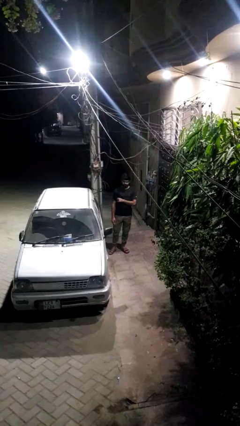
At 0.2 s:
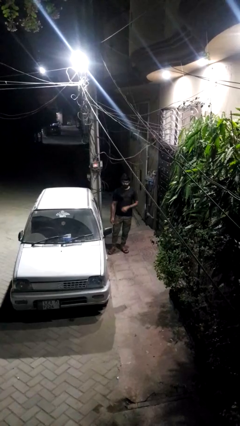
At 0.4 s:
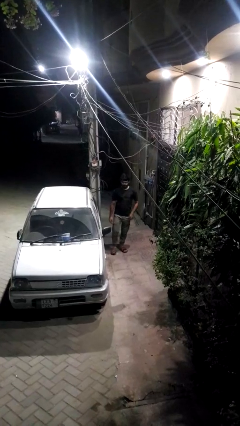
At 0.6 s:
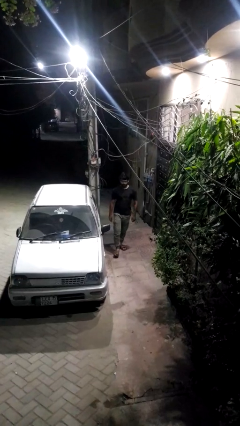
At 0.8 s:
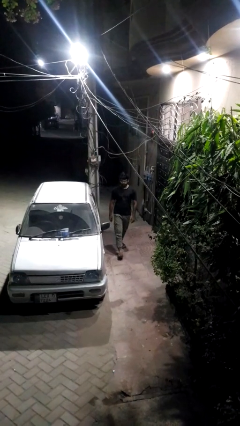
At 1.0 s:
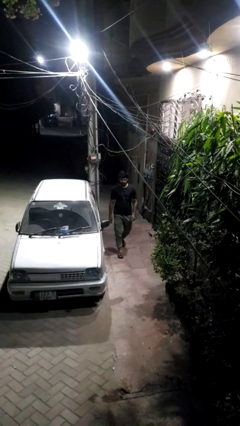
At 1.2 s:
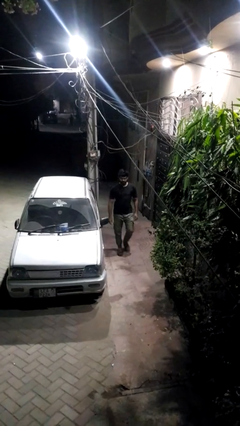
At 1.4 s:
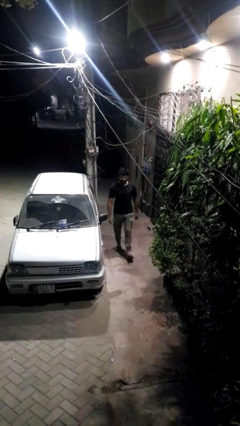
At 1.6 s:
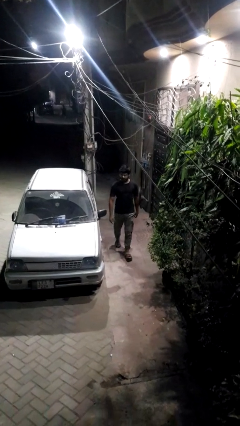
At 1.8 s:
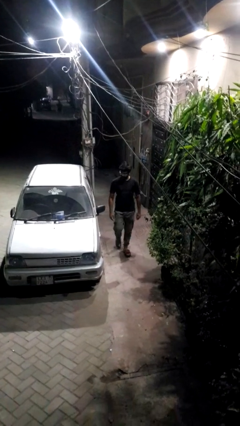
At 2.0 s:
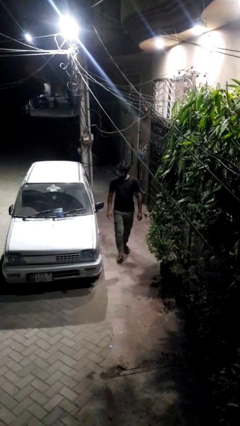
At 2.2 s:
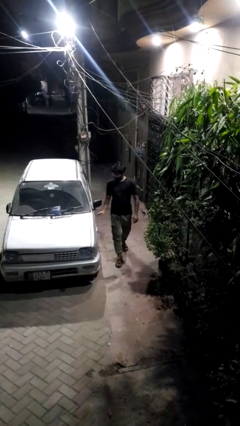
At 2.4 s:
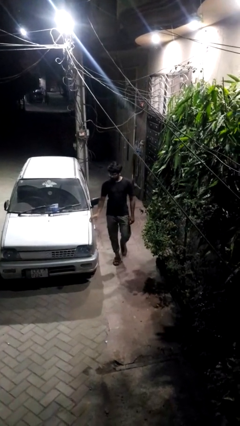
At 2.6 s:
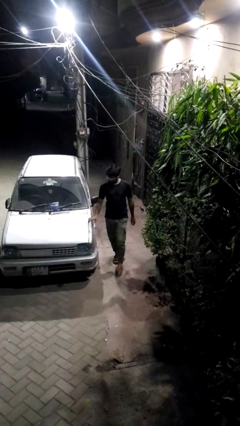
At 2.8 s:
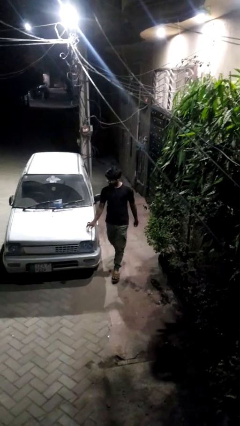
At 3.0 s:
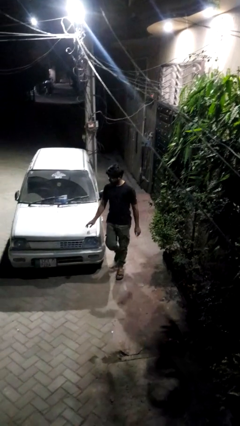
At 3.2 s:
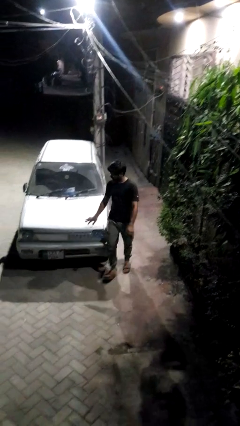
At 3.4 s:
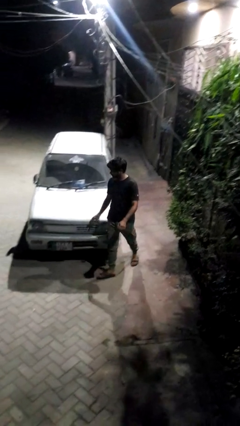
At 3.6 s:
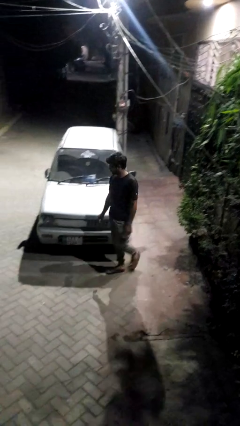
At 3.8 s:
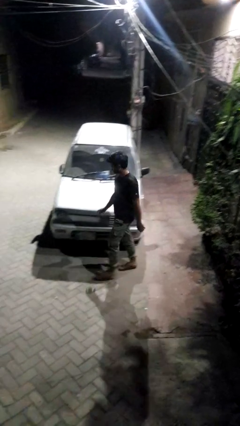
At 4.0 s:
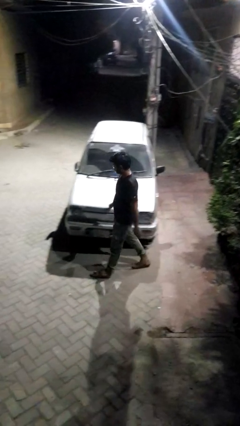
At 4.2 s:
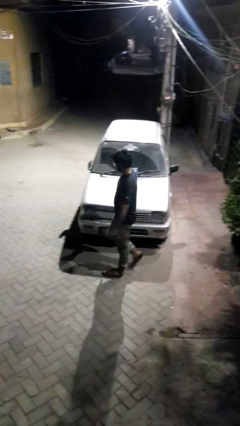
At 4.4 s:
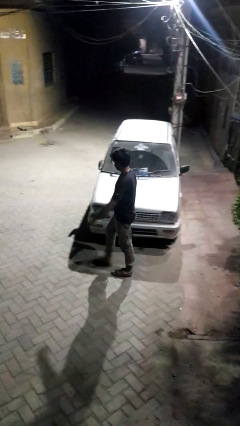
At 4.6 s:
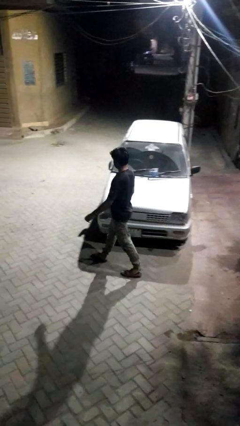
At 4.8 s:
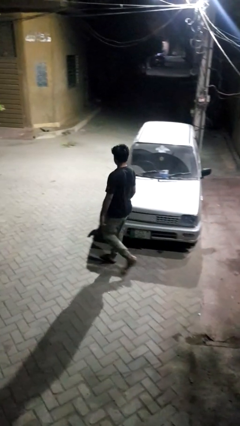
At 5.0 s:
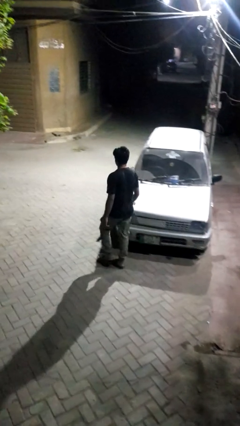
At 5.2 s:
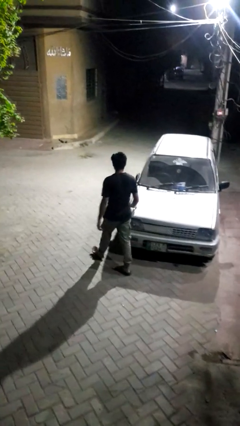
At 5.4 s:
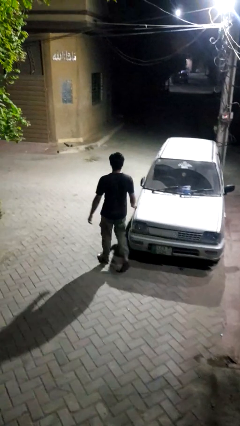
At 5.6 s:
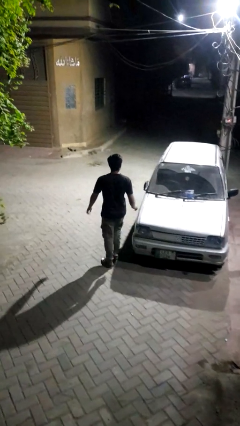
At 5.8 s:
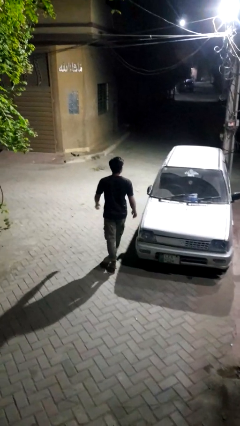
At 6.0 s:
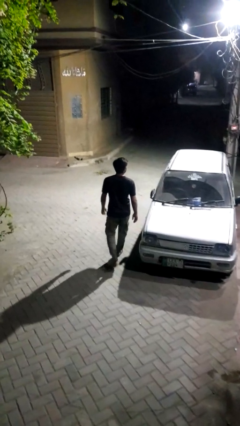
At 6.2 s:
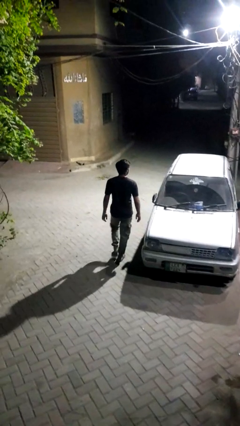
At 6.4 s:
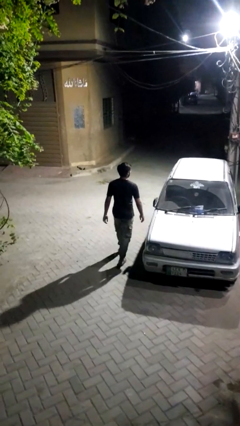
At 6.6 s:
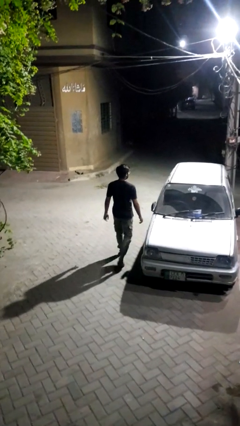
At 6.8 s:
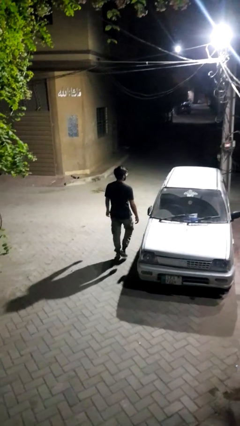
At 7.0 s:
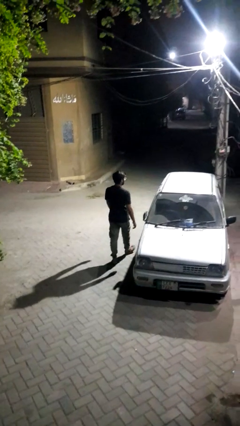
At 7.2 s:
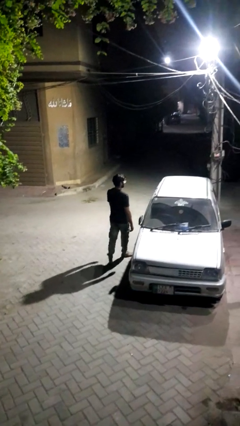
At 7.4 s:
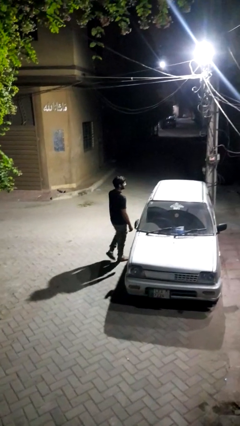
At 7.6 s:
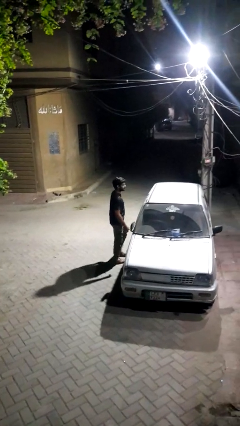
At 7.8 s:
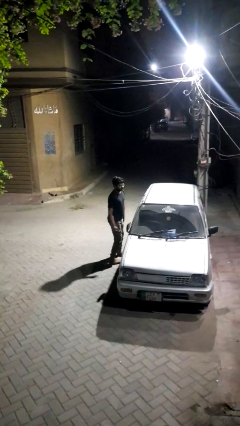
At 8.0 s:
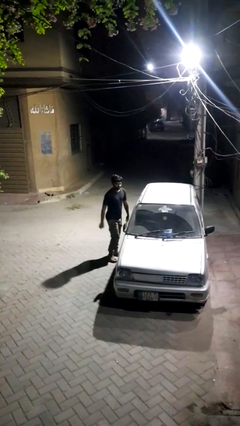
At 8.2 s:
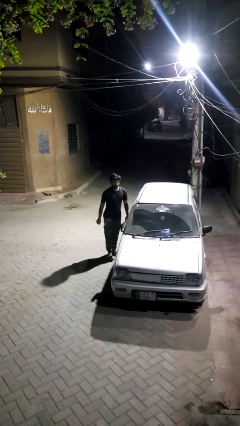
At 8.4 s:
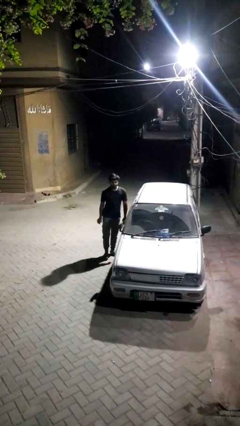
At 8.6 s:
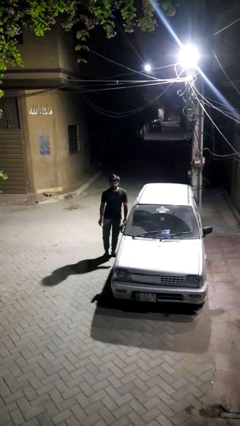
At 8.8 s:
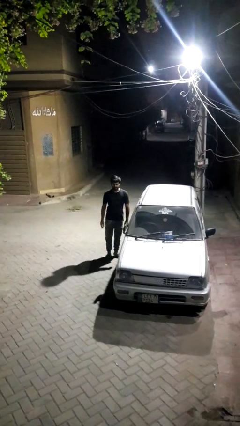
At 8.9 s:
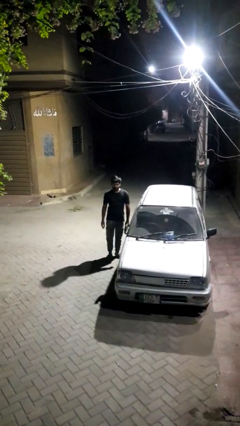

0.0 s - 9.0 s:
person walks around car

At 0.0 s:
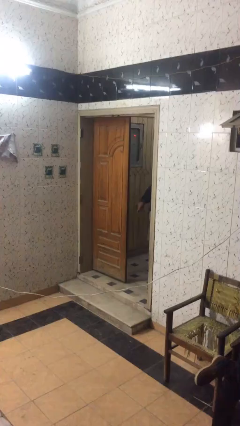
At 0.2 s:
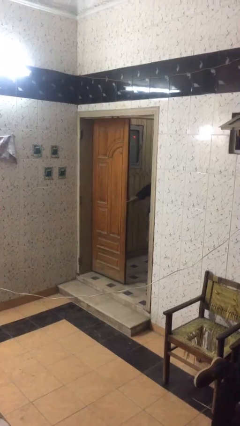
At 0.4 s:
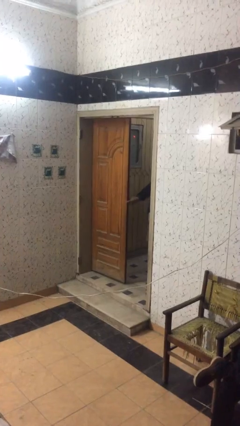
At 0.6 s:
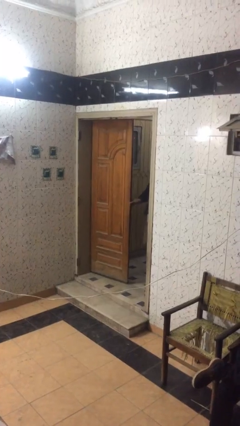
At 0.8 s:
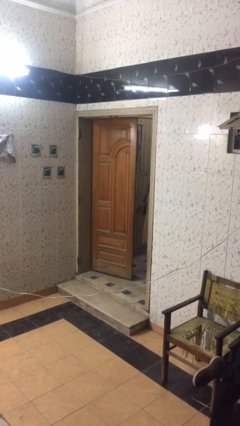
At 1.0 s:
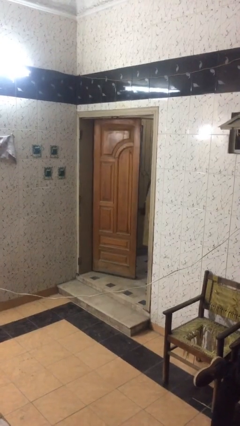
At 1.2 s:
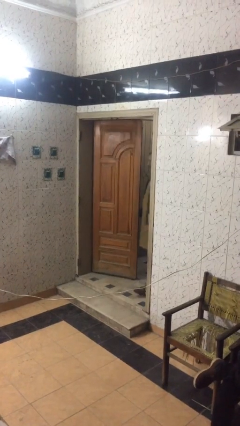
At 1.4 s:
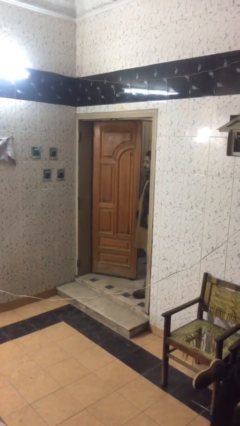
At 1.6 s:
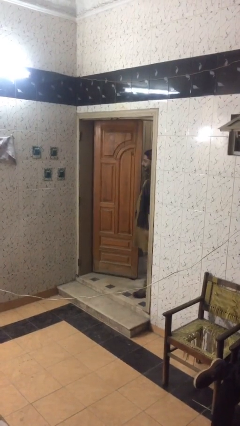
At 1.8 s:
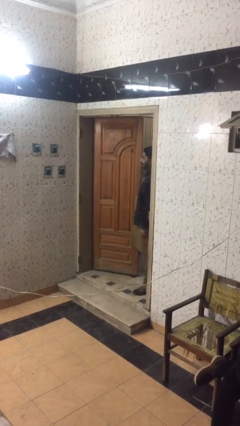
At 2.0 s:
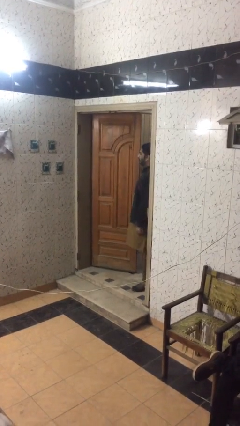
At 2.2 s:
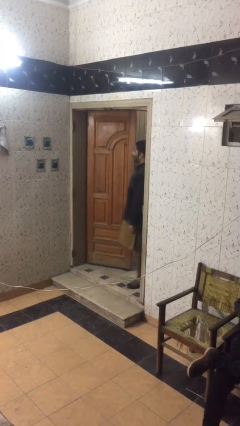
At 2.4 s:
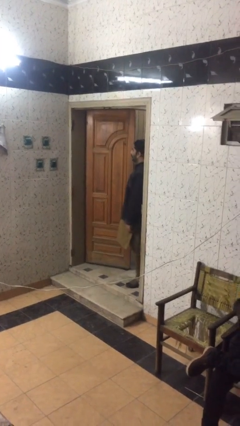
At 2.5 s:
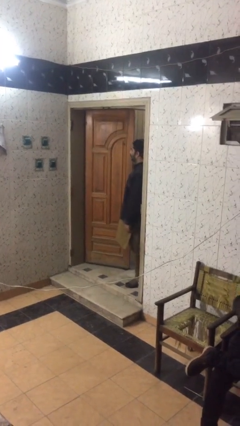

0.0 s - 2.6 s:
person opens facility door

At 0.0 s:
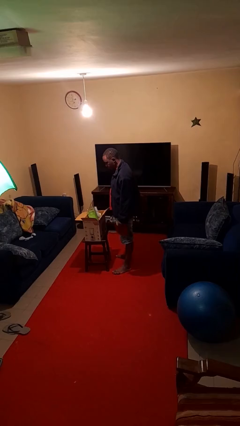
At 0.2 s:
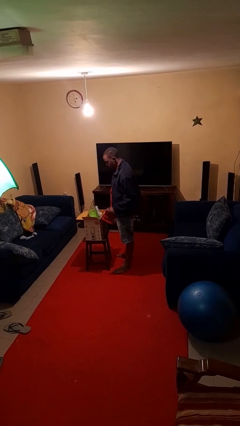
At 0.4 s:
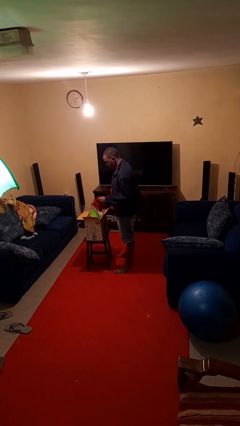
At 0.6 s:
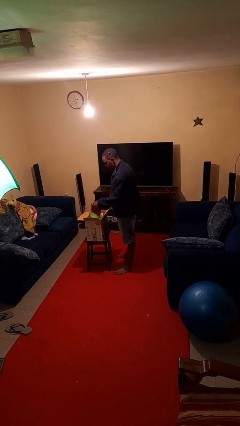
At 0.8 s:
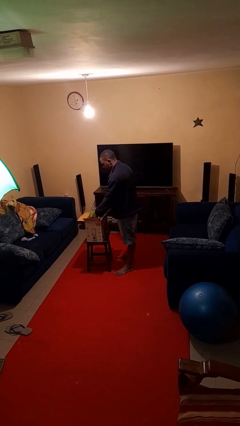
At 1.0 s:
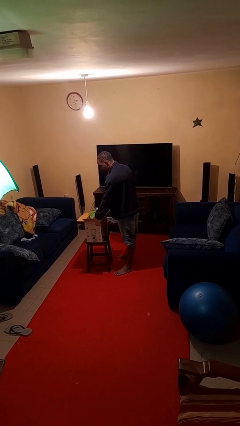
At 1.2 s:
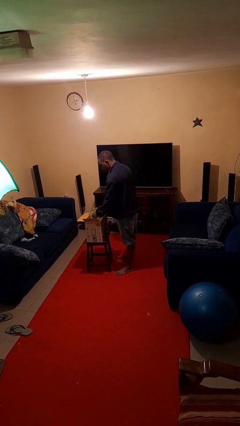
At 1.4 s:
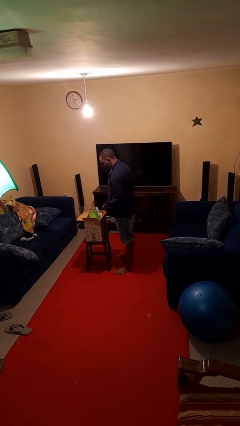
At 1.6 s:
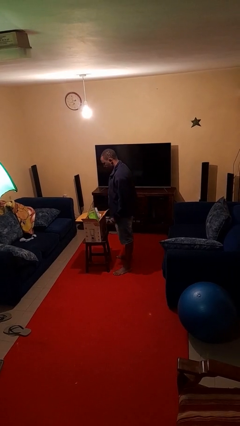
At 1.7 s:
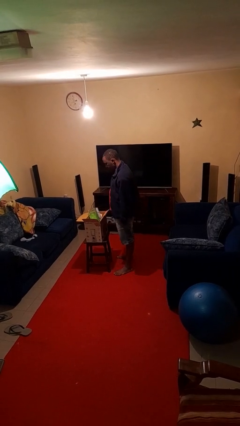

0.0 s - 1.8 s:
person puts object into box

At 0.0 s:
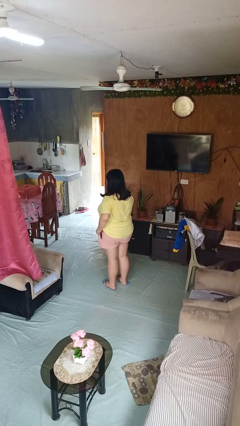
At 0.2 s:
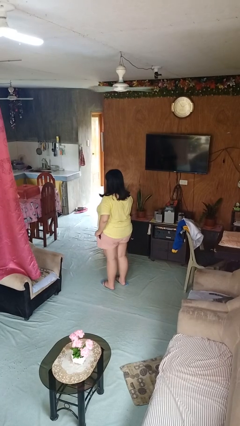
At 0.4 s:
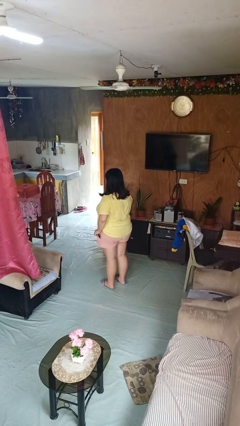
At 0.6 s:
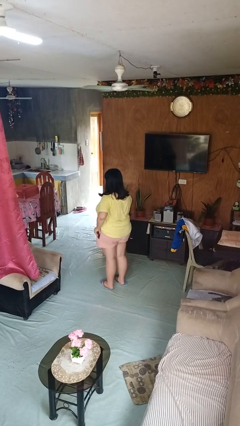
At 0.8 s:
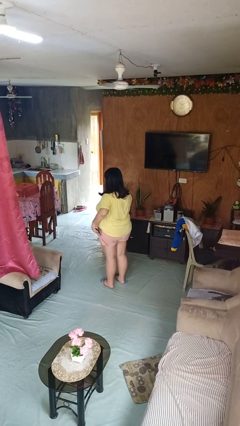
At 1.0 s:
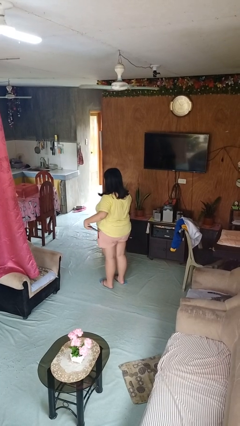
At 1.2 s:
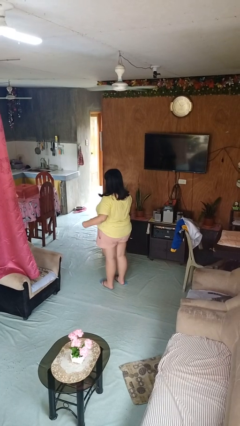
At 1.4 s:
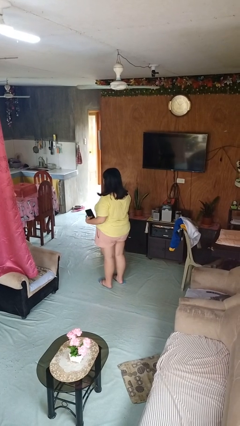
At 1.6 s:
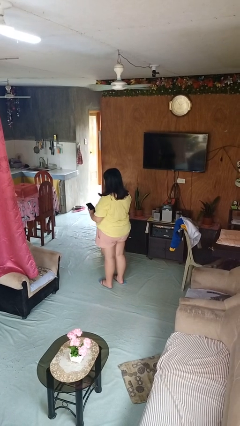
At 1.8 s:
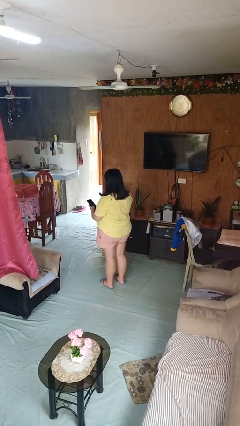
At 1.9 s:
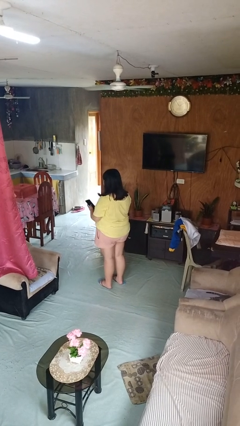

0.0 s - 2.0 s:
person takes phone from pocket

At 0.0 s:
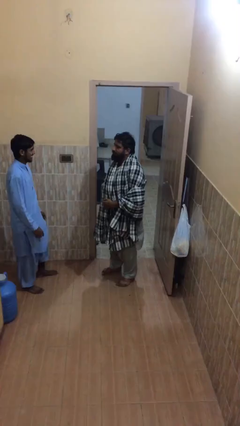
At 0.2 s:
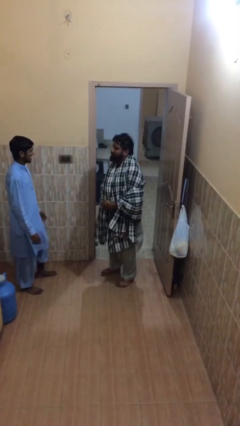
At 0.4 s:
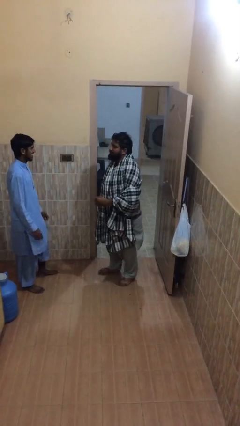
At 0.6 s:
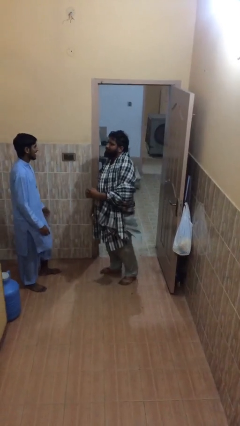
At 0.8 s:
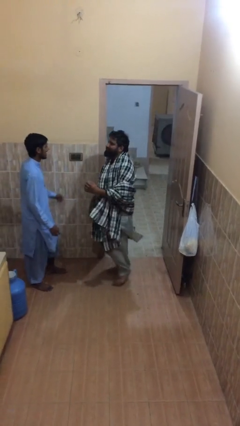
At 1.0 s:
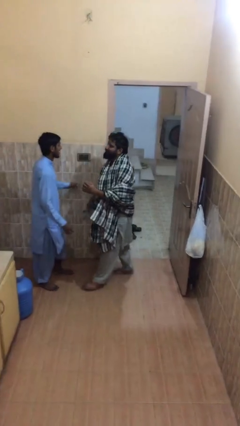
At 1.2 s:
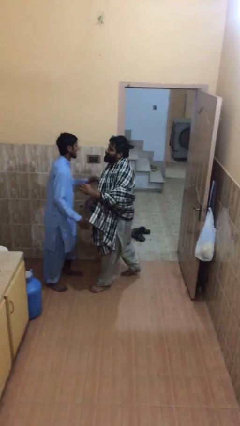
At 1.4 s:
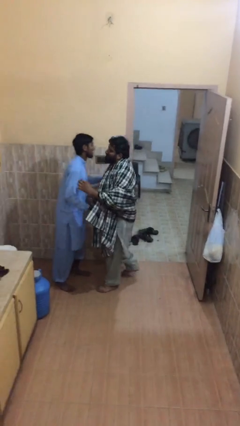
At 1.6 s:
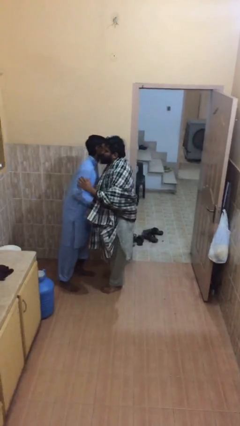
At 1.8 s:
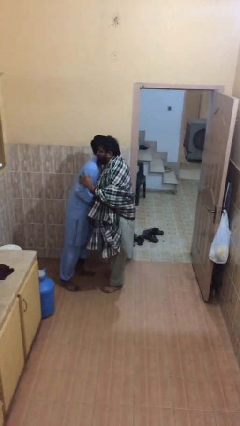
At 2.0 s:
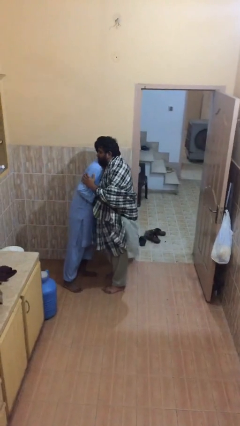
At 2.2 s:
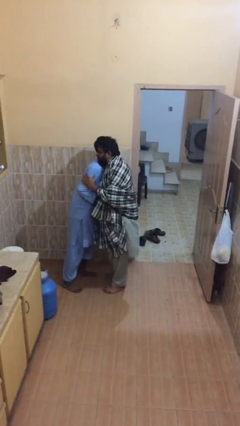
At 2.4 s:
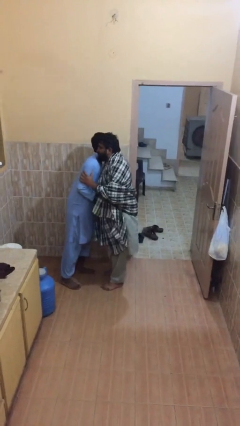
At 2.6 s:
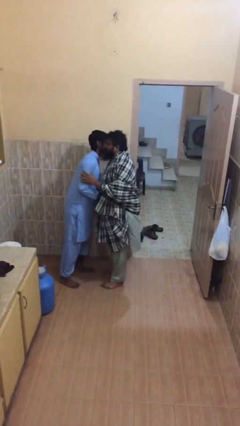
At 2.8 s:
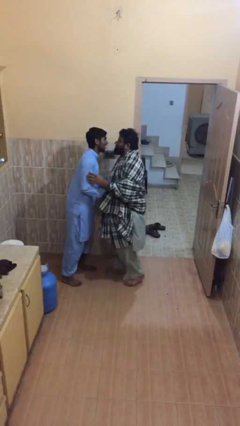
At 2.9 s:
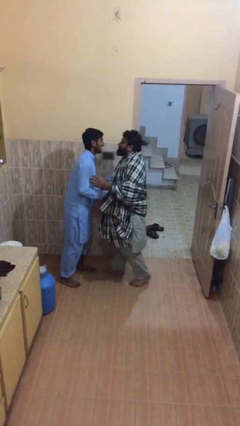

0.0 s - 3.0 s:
person embraces person
